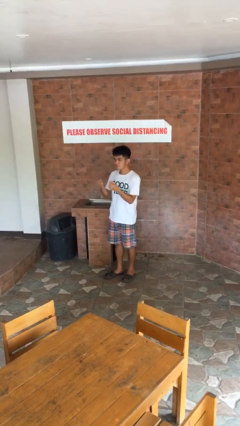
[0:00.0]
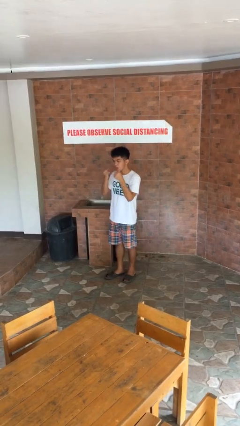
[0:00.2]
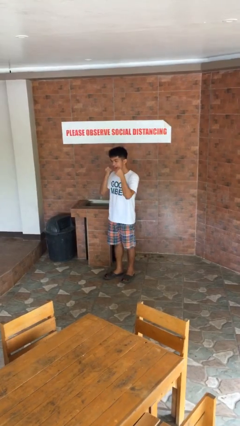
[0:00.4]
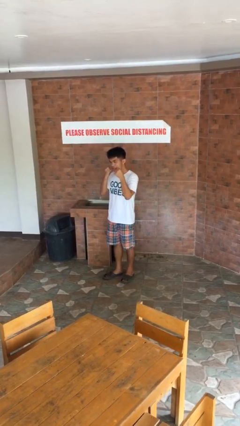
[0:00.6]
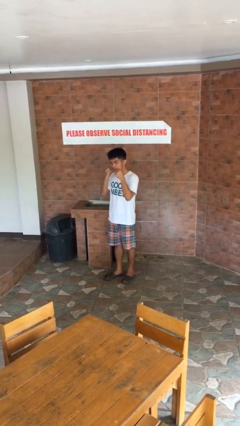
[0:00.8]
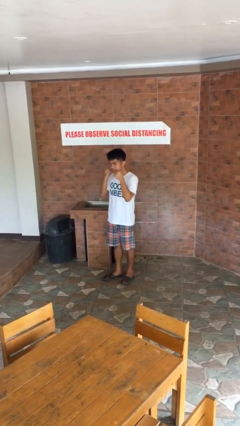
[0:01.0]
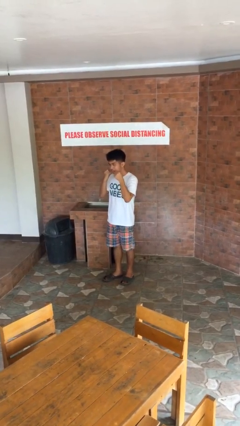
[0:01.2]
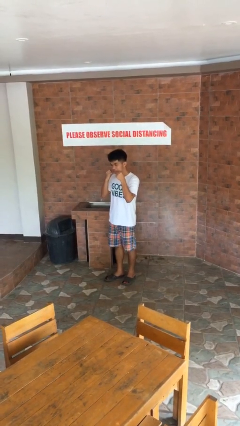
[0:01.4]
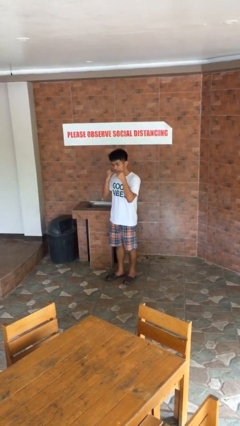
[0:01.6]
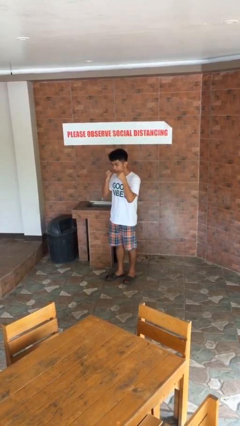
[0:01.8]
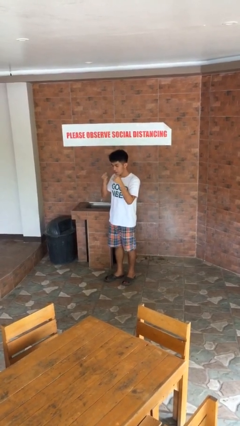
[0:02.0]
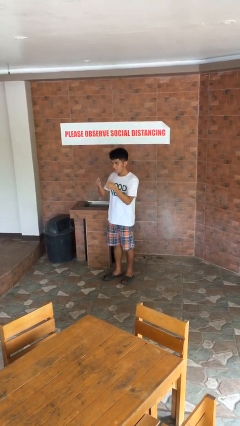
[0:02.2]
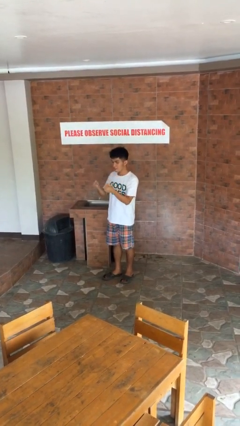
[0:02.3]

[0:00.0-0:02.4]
person flosses

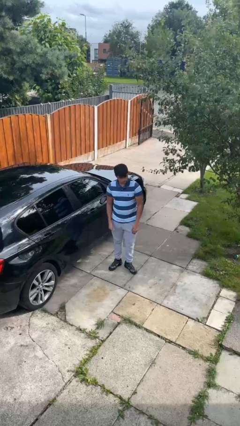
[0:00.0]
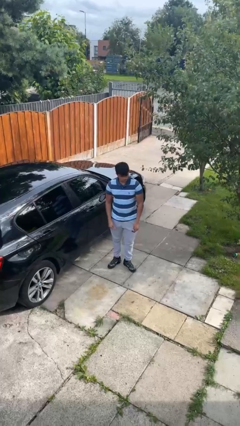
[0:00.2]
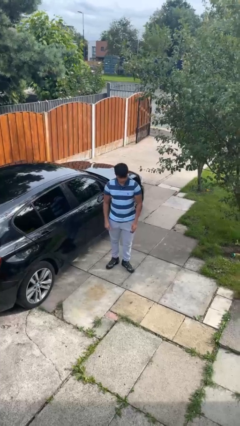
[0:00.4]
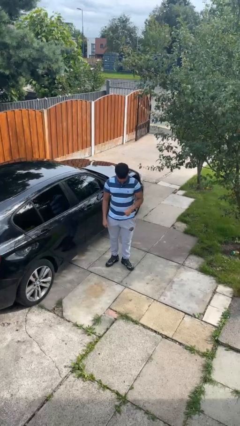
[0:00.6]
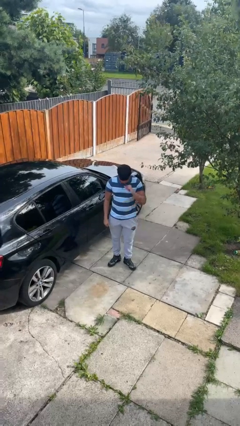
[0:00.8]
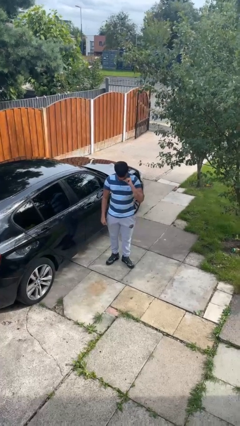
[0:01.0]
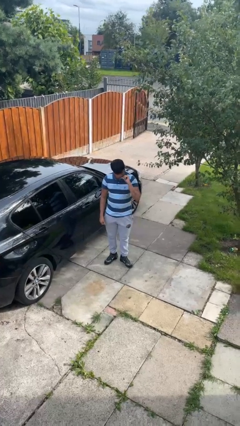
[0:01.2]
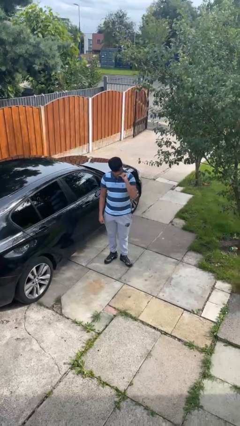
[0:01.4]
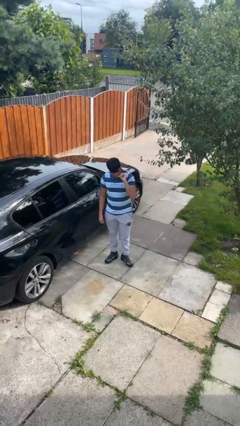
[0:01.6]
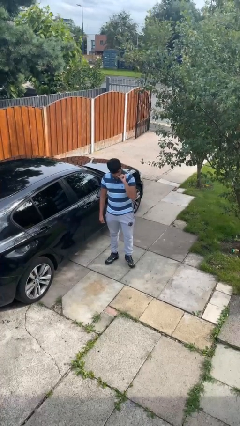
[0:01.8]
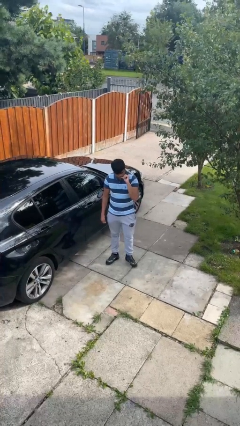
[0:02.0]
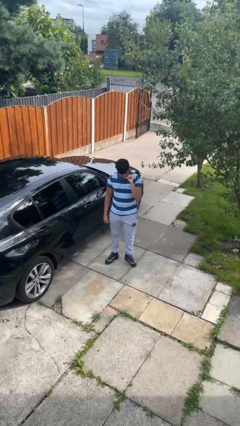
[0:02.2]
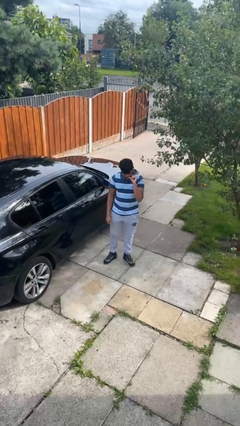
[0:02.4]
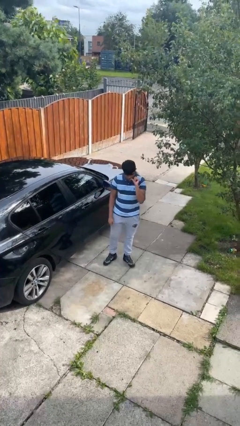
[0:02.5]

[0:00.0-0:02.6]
person licks fingers

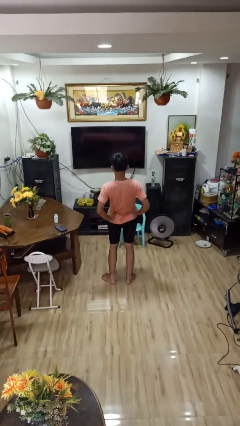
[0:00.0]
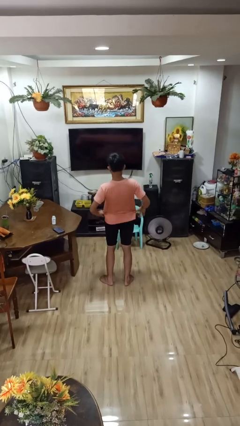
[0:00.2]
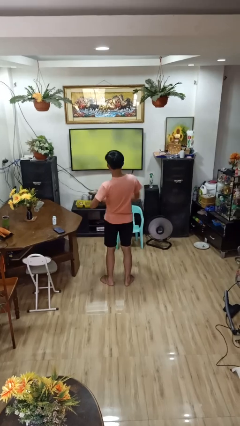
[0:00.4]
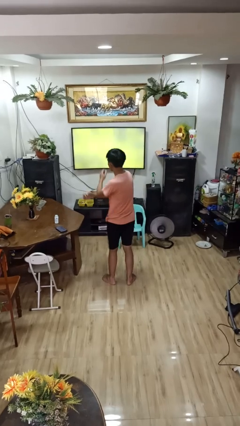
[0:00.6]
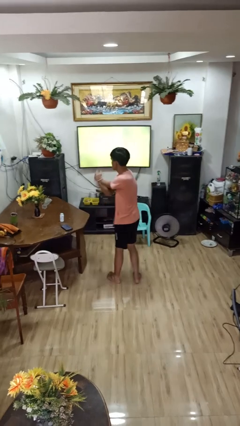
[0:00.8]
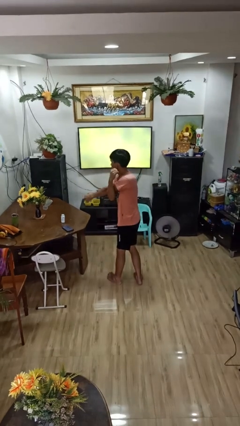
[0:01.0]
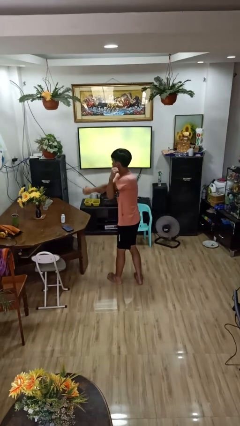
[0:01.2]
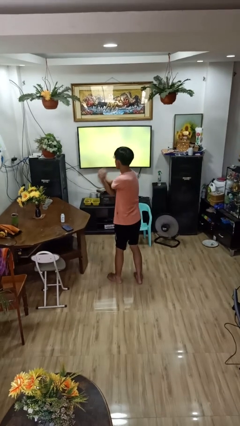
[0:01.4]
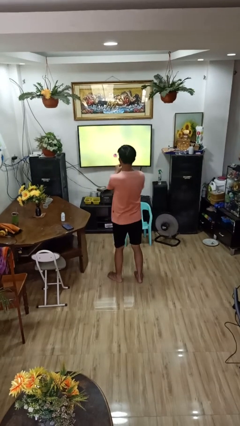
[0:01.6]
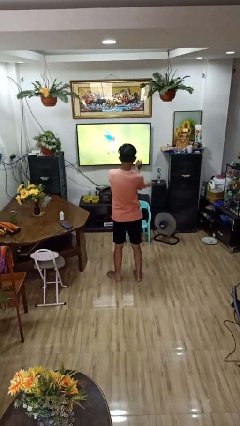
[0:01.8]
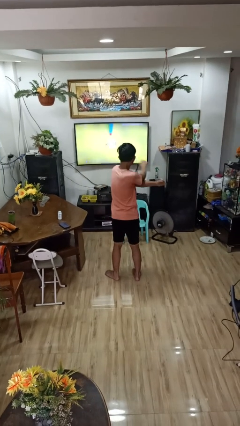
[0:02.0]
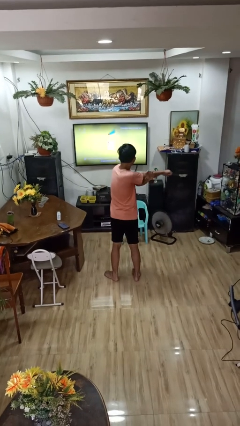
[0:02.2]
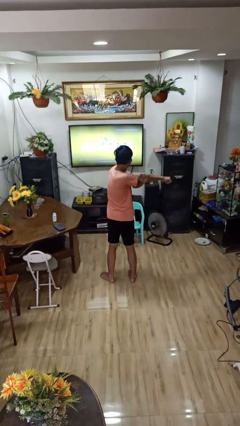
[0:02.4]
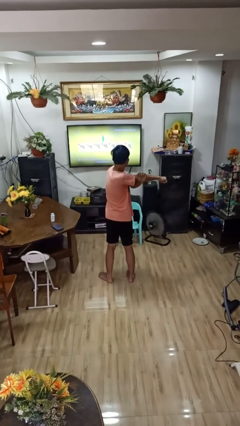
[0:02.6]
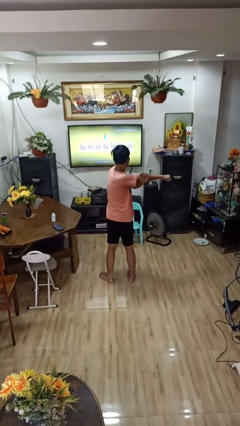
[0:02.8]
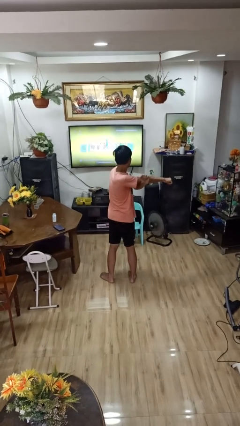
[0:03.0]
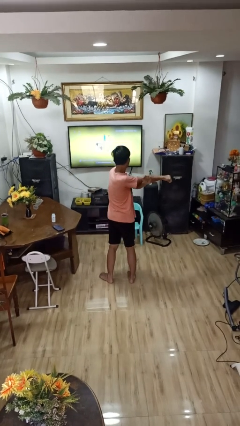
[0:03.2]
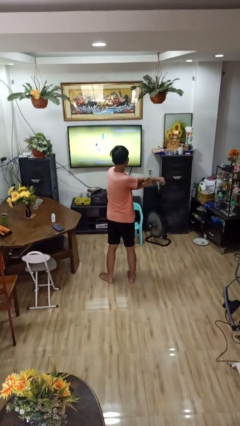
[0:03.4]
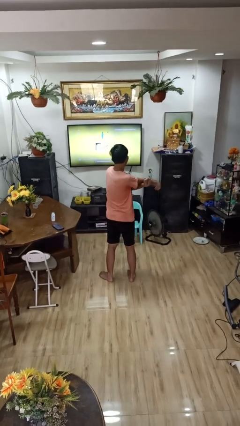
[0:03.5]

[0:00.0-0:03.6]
person stretches arms to side

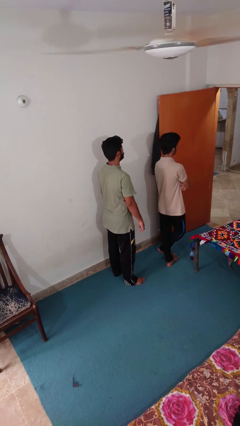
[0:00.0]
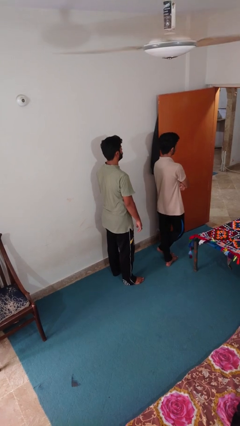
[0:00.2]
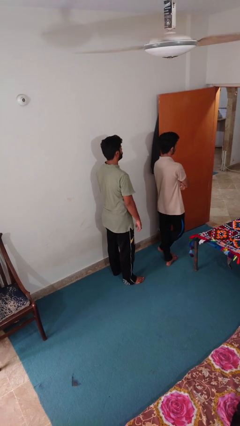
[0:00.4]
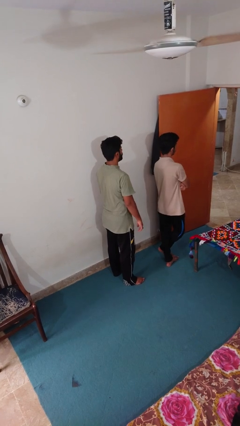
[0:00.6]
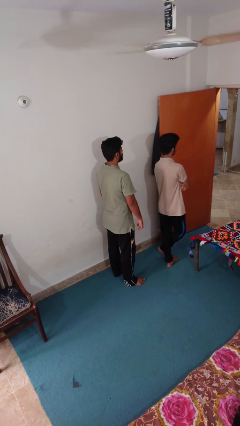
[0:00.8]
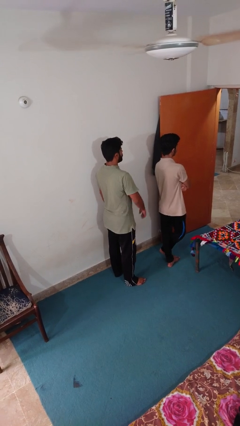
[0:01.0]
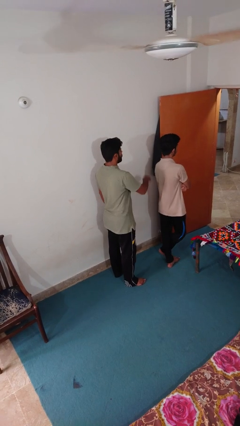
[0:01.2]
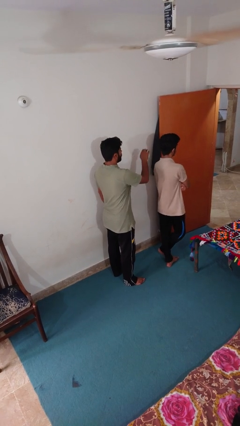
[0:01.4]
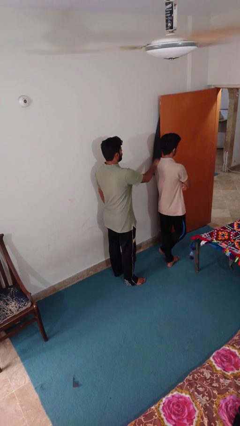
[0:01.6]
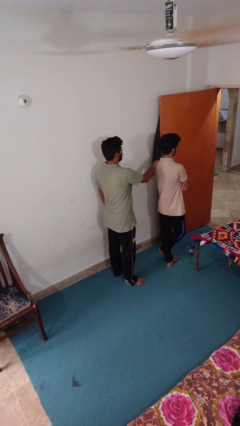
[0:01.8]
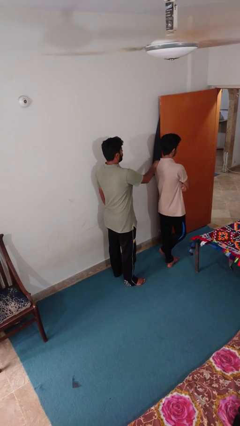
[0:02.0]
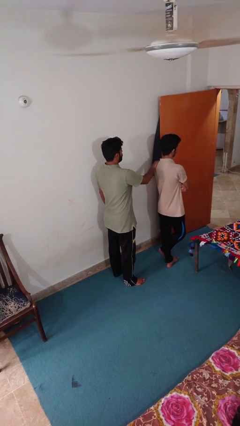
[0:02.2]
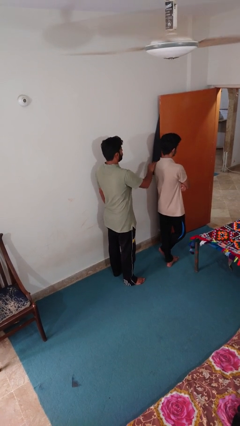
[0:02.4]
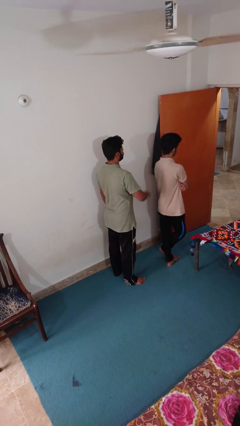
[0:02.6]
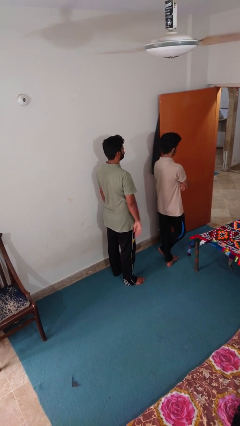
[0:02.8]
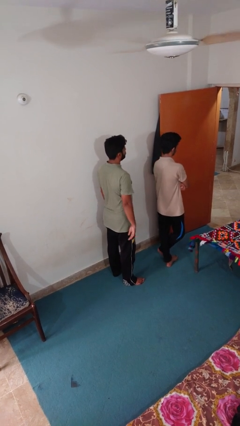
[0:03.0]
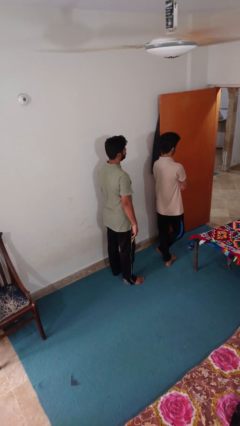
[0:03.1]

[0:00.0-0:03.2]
person touches back of person

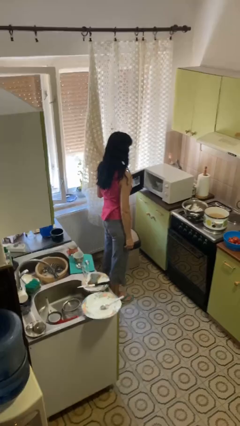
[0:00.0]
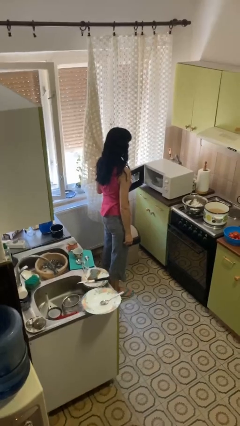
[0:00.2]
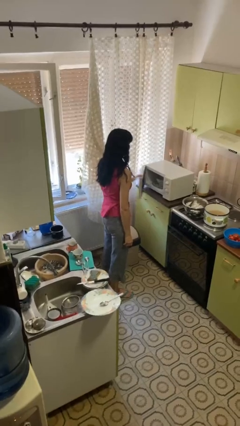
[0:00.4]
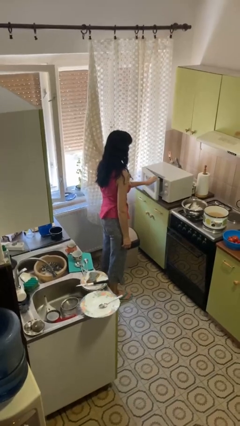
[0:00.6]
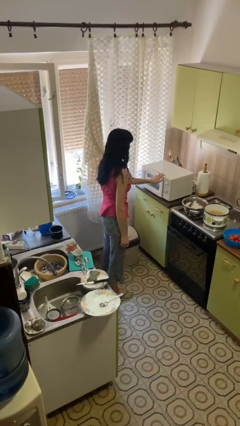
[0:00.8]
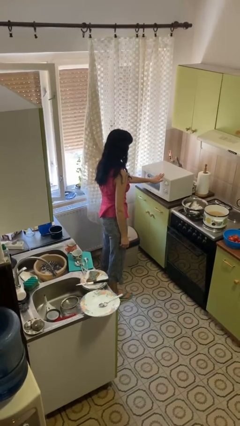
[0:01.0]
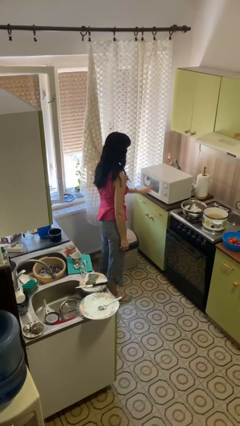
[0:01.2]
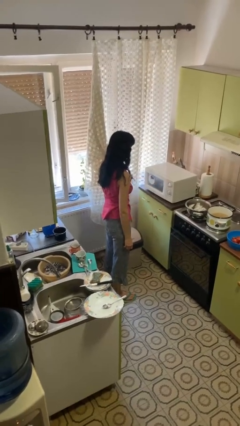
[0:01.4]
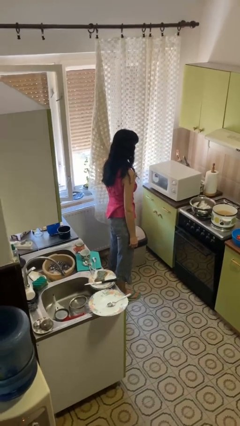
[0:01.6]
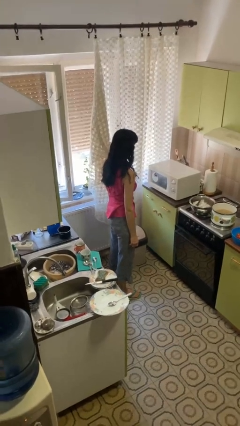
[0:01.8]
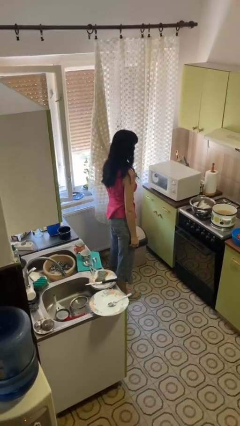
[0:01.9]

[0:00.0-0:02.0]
person closes microwave

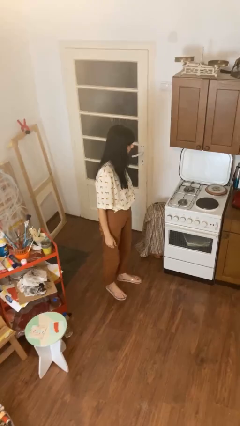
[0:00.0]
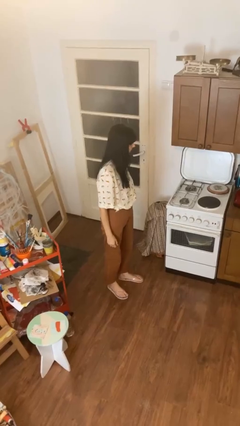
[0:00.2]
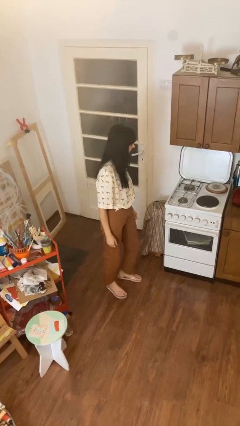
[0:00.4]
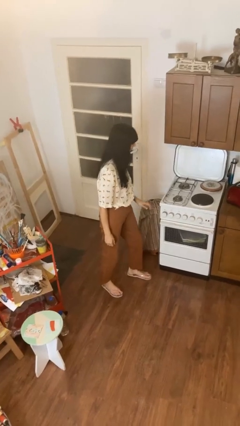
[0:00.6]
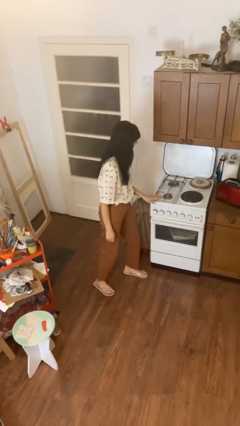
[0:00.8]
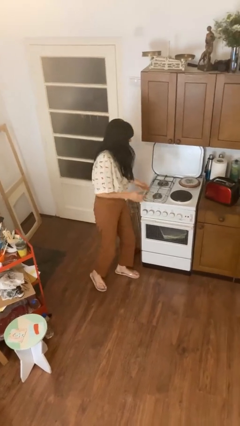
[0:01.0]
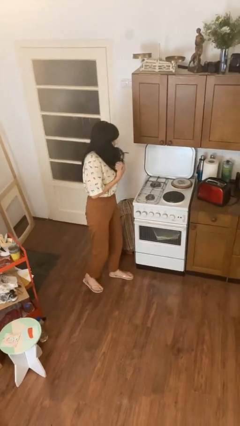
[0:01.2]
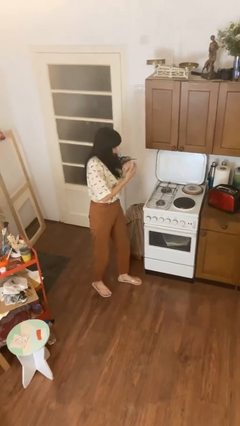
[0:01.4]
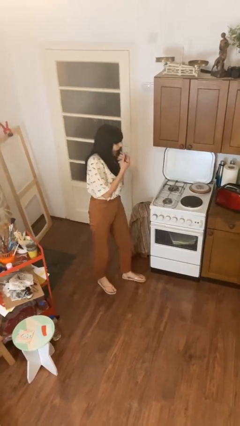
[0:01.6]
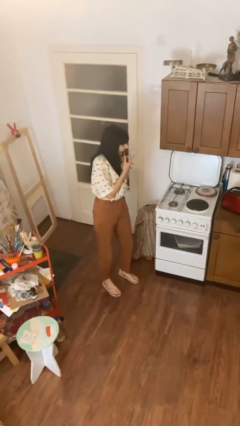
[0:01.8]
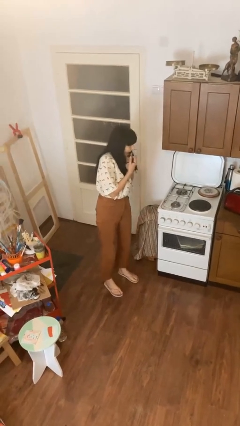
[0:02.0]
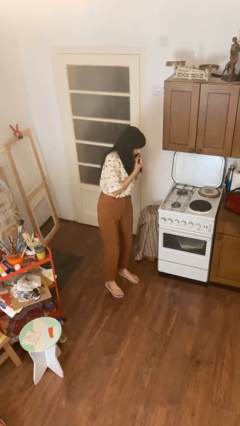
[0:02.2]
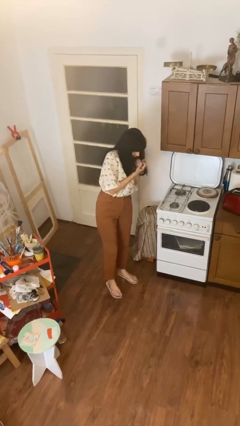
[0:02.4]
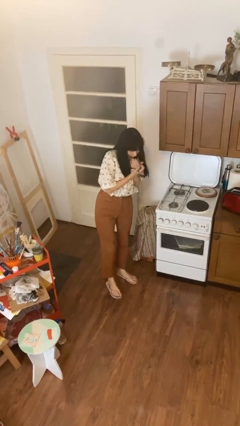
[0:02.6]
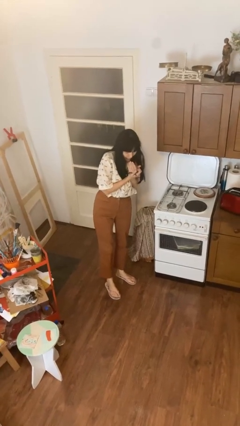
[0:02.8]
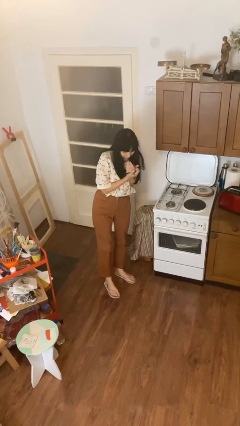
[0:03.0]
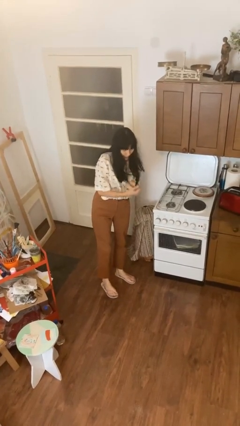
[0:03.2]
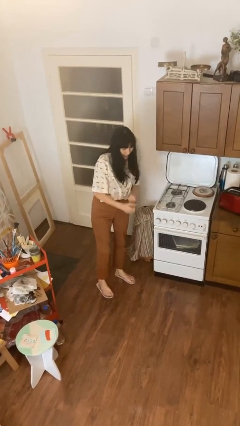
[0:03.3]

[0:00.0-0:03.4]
person burns hand
